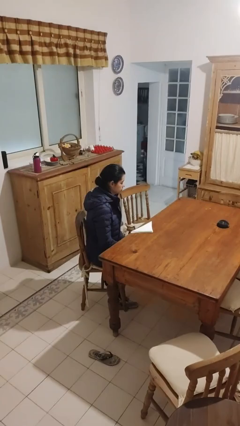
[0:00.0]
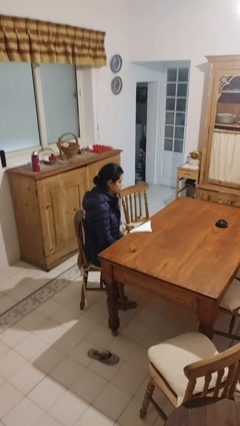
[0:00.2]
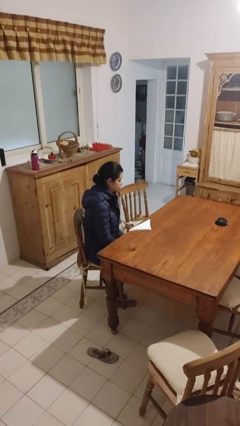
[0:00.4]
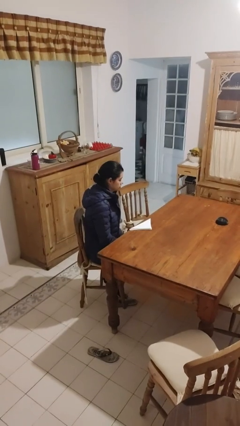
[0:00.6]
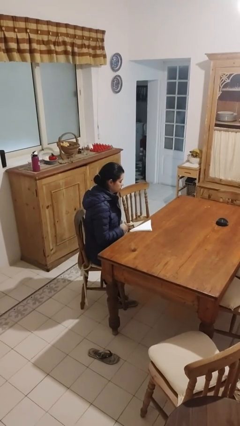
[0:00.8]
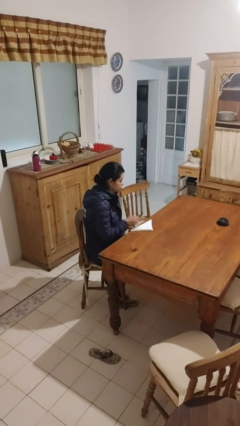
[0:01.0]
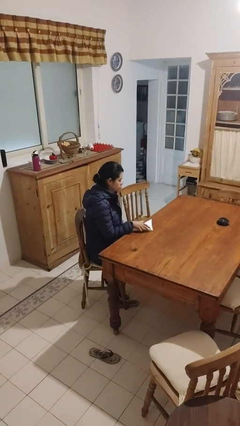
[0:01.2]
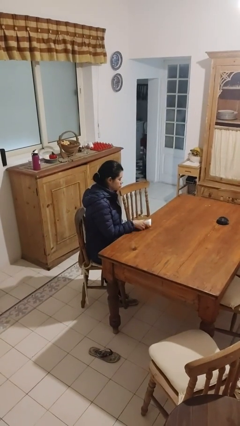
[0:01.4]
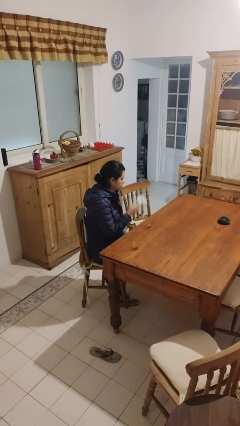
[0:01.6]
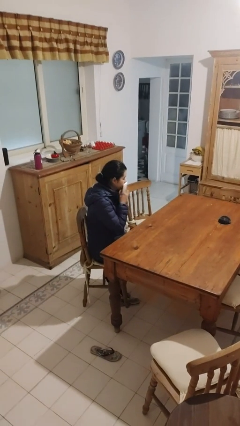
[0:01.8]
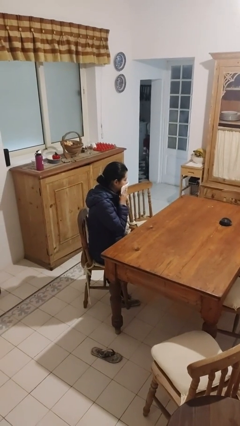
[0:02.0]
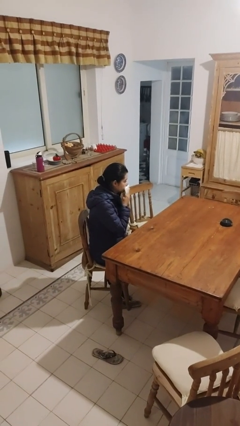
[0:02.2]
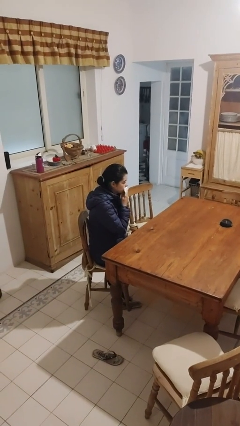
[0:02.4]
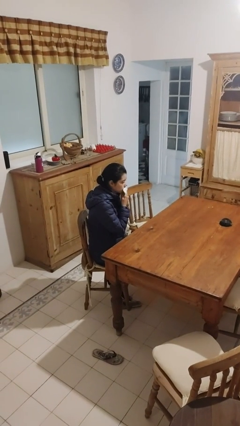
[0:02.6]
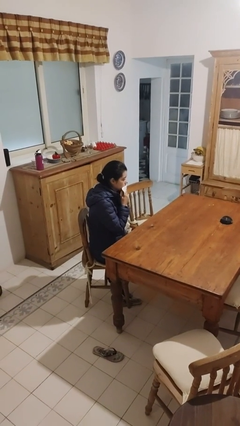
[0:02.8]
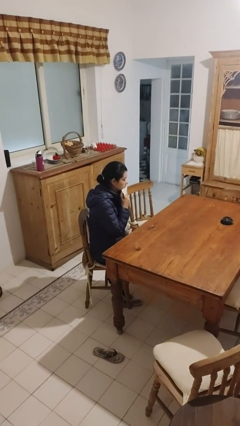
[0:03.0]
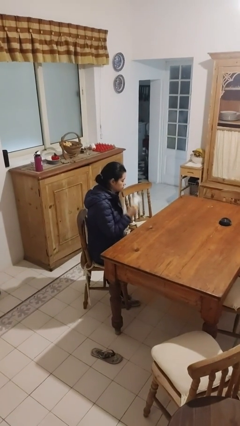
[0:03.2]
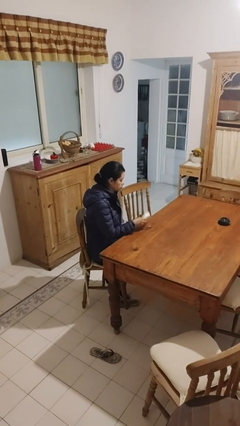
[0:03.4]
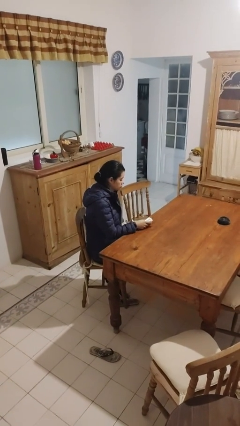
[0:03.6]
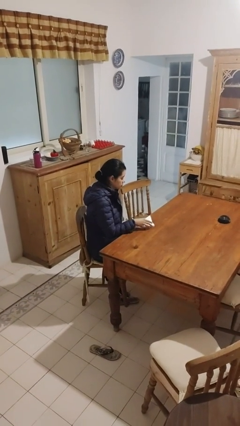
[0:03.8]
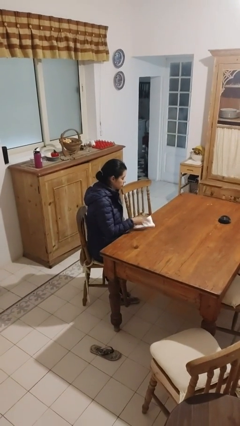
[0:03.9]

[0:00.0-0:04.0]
person wipes mouth with napkin

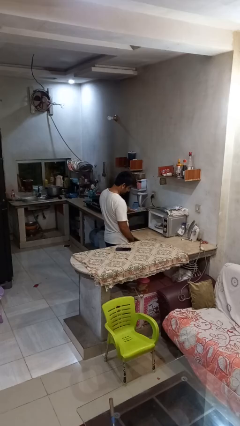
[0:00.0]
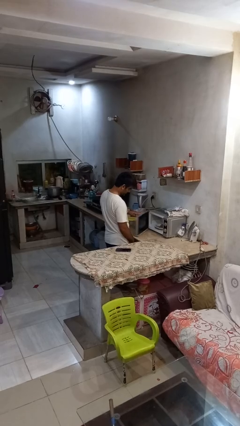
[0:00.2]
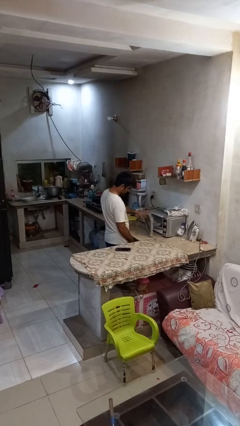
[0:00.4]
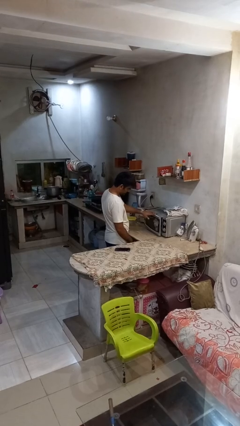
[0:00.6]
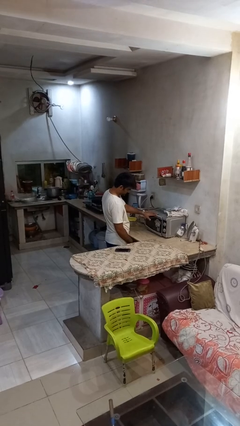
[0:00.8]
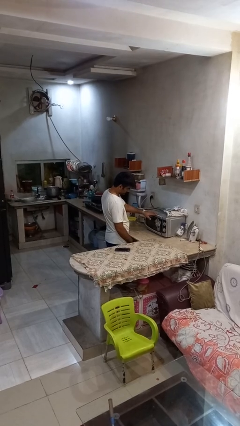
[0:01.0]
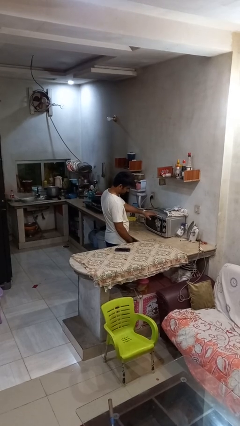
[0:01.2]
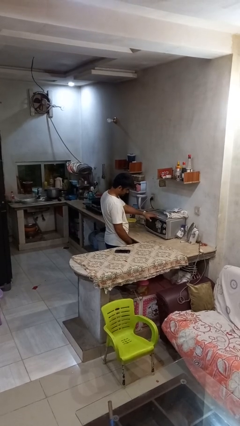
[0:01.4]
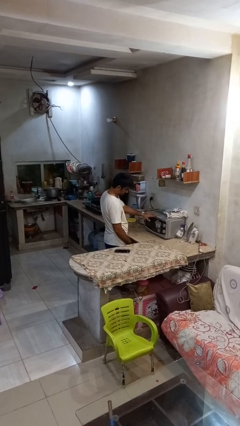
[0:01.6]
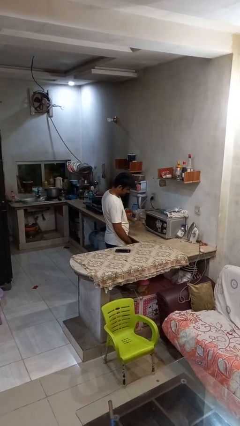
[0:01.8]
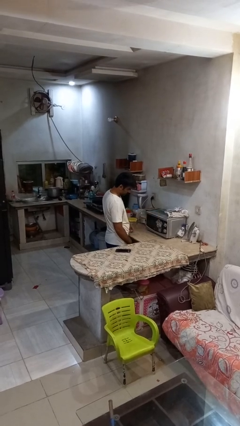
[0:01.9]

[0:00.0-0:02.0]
person closes microwave

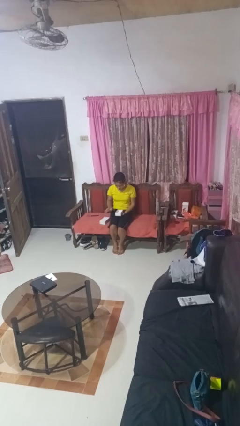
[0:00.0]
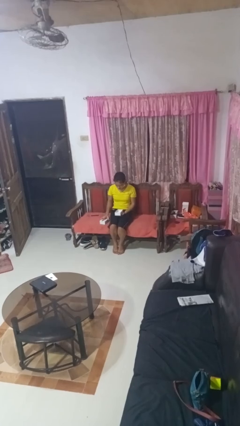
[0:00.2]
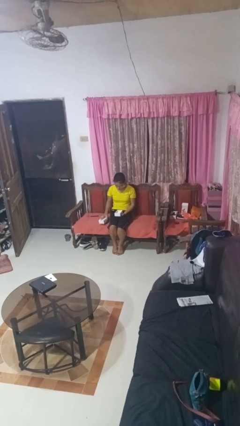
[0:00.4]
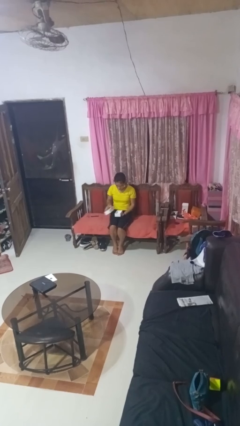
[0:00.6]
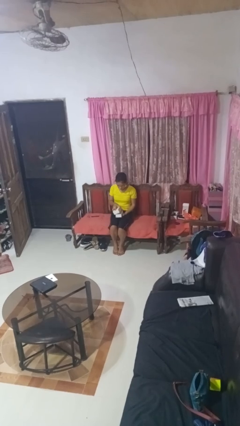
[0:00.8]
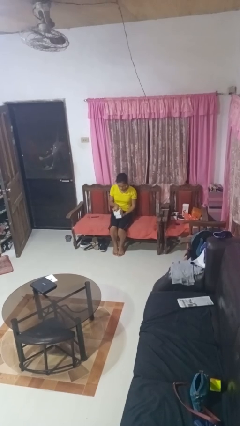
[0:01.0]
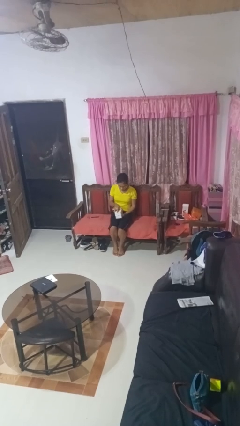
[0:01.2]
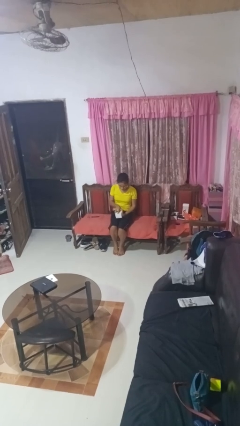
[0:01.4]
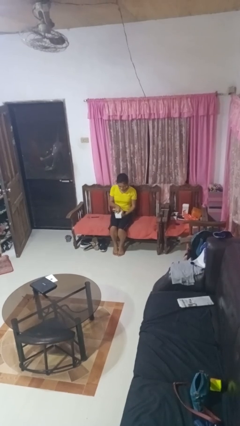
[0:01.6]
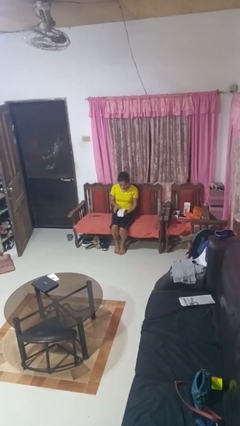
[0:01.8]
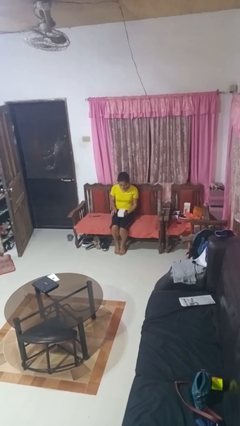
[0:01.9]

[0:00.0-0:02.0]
person closes jewelry box

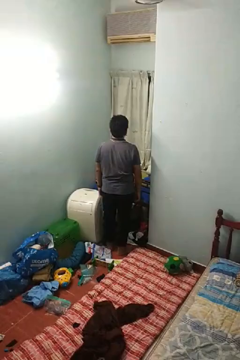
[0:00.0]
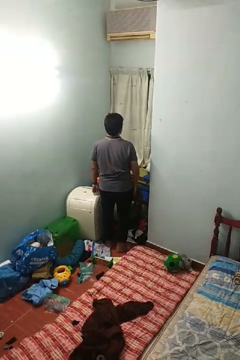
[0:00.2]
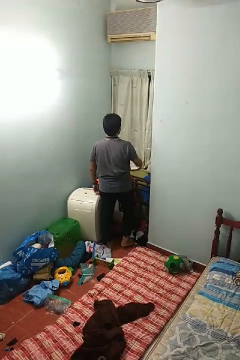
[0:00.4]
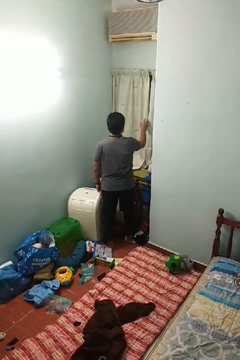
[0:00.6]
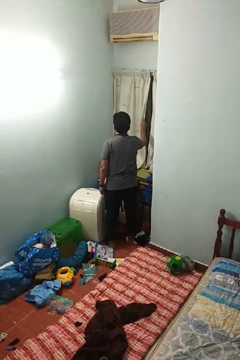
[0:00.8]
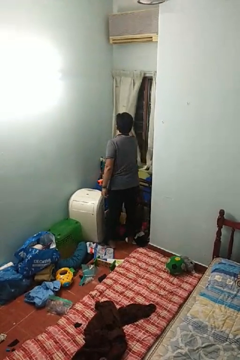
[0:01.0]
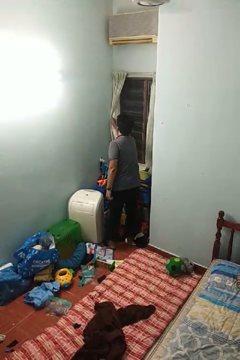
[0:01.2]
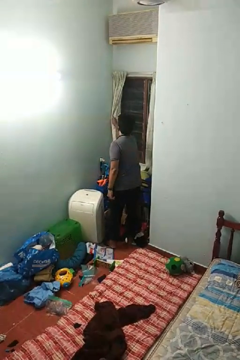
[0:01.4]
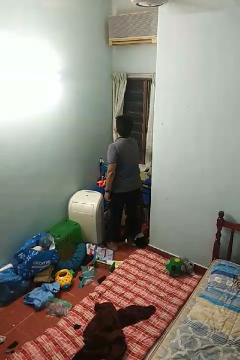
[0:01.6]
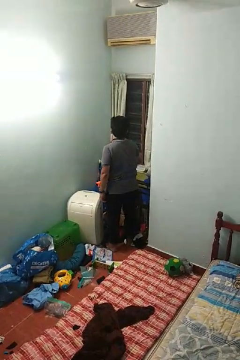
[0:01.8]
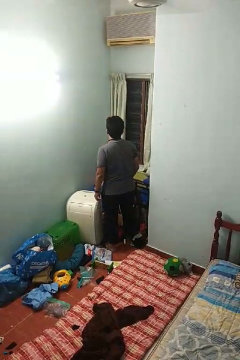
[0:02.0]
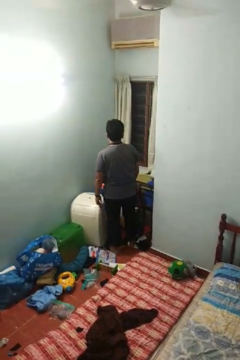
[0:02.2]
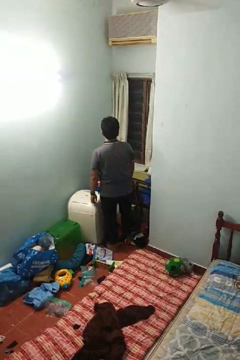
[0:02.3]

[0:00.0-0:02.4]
person opens curtains

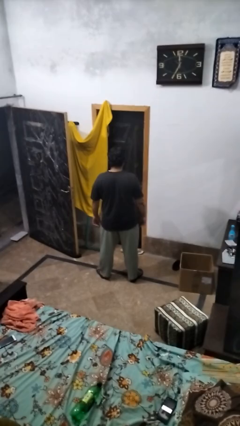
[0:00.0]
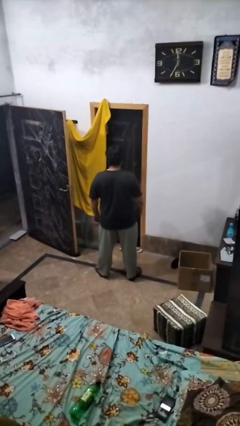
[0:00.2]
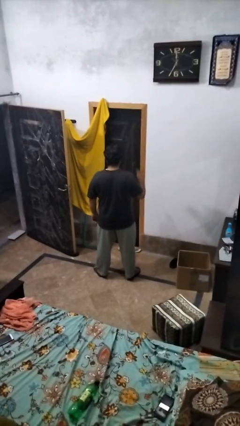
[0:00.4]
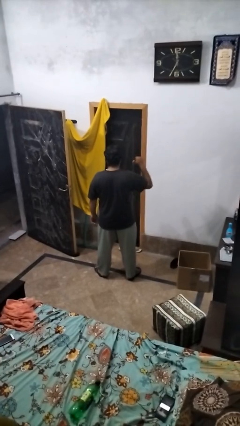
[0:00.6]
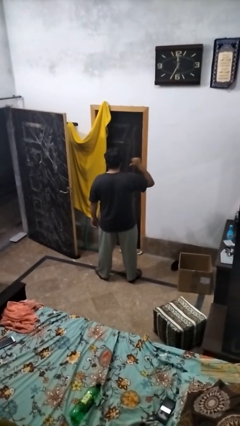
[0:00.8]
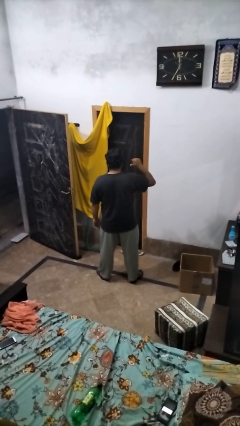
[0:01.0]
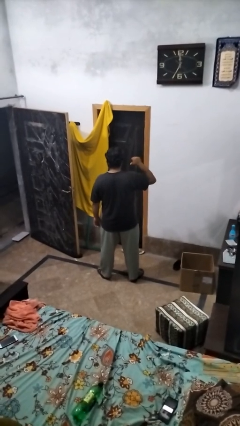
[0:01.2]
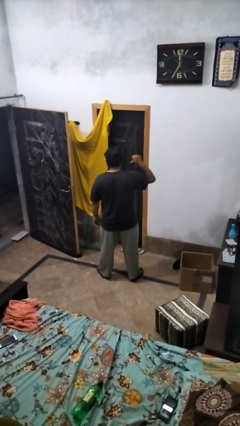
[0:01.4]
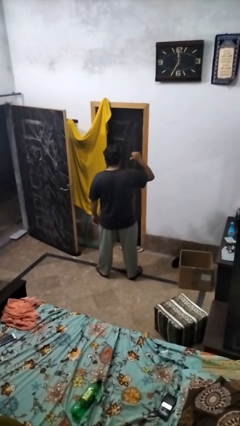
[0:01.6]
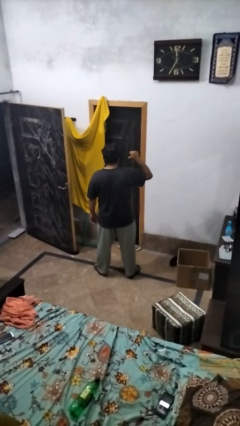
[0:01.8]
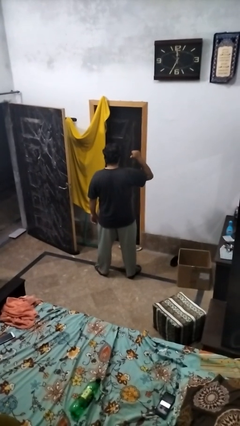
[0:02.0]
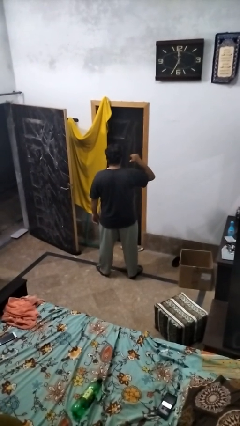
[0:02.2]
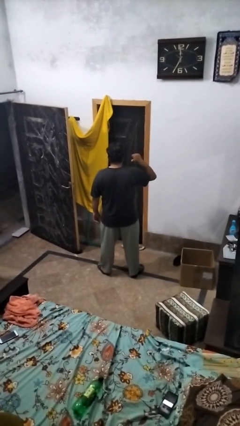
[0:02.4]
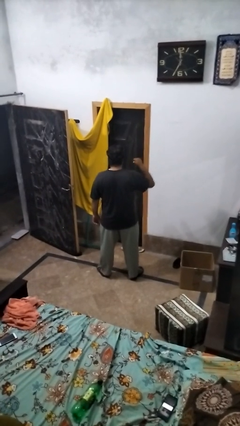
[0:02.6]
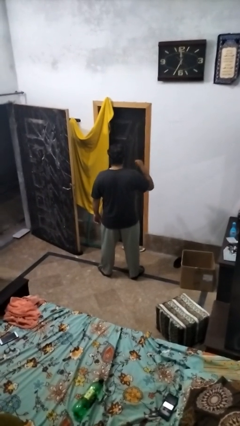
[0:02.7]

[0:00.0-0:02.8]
person gestures behind me

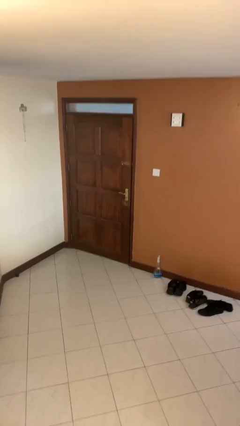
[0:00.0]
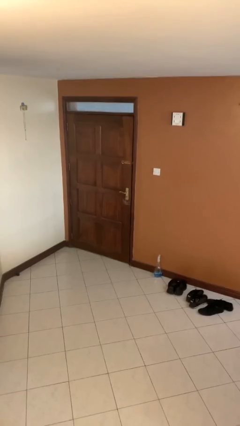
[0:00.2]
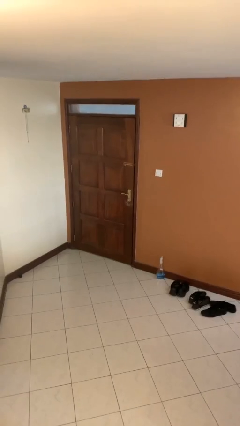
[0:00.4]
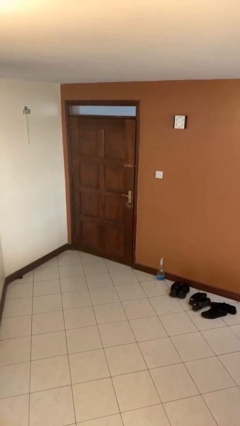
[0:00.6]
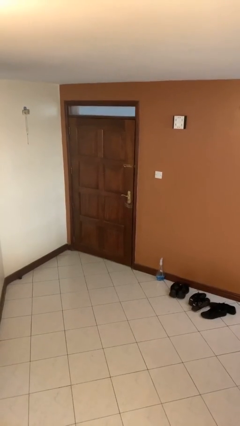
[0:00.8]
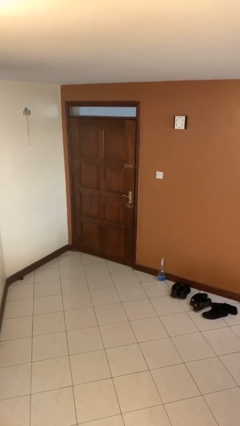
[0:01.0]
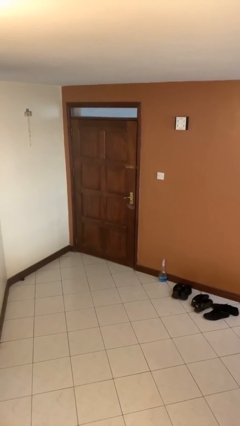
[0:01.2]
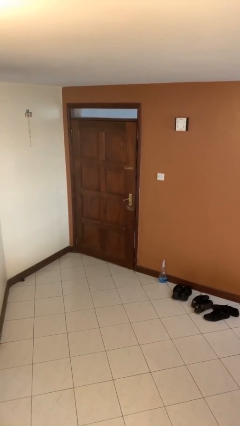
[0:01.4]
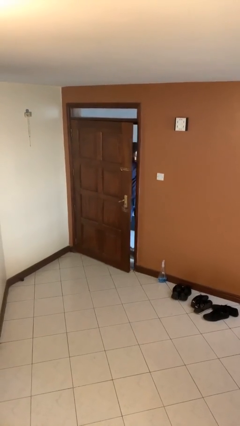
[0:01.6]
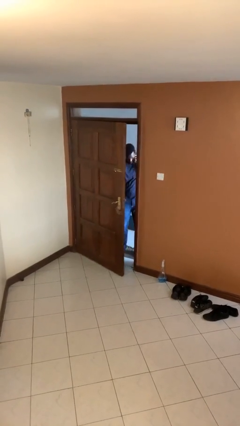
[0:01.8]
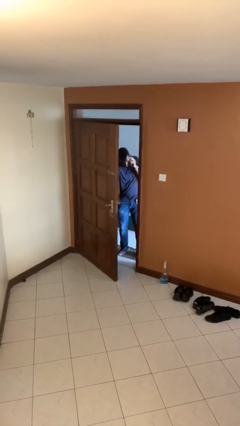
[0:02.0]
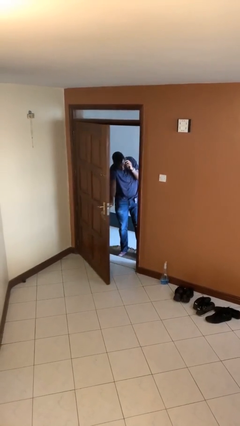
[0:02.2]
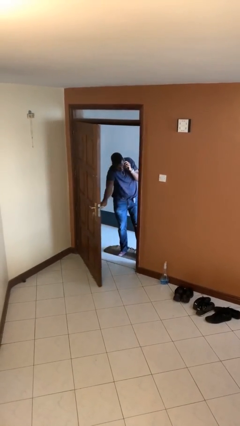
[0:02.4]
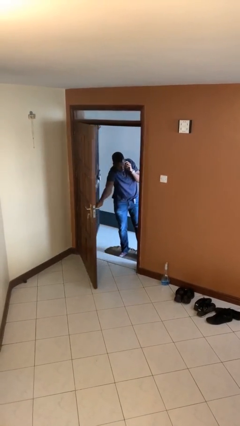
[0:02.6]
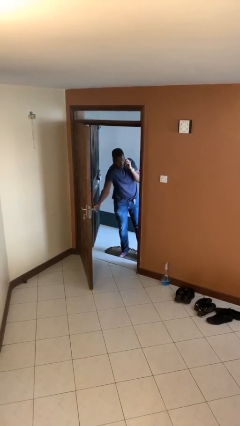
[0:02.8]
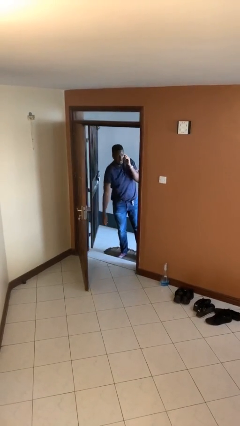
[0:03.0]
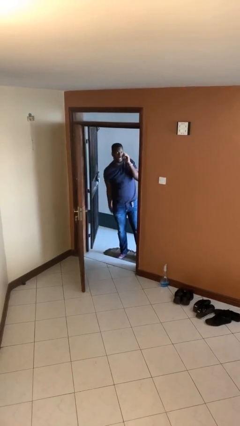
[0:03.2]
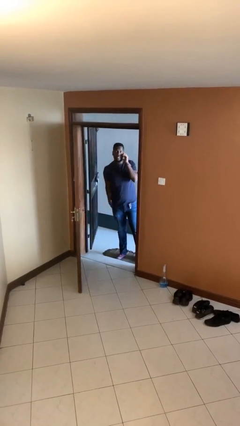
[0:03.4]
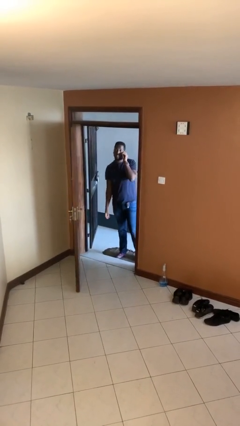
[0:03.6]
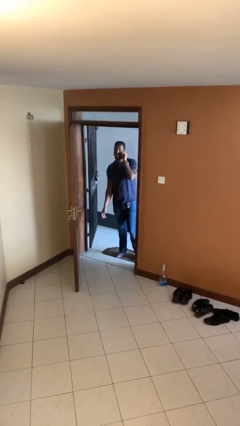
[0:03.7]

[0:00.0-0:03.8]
person opens facility door

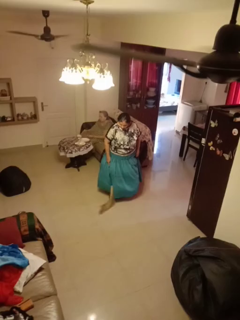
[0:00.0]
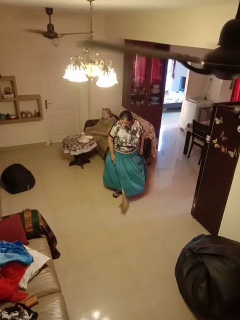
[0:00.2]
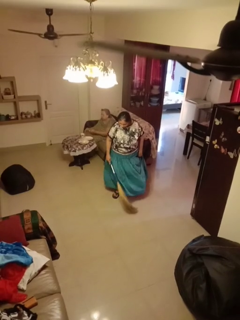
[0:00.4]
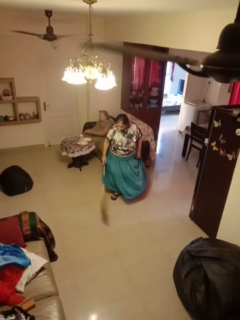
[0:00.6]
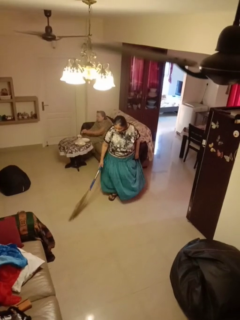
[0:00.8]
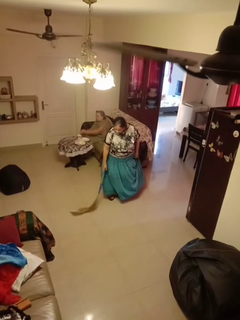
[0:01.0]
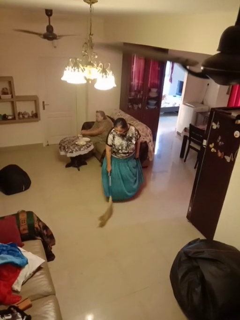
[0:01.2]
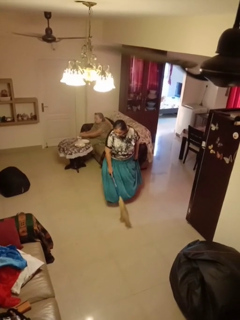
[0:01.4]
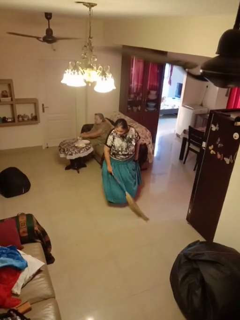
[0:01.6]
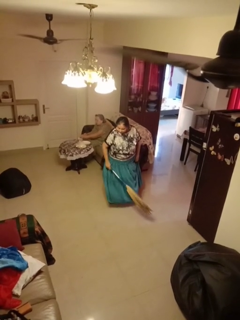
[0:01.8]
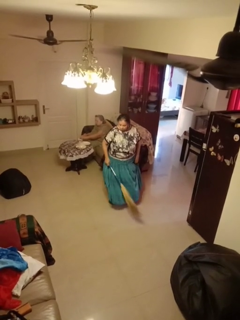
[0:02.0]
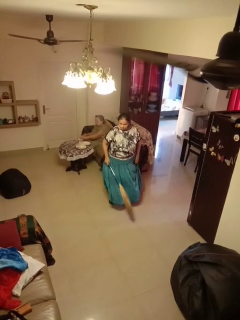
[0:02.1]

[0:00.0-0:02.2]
person sweeps floor
